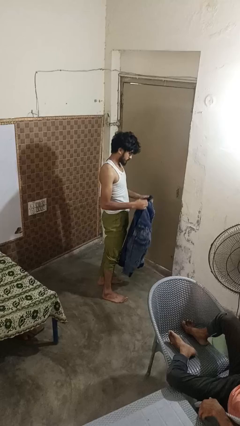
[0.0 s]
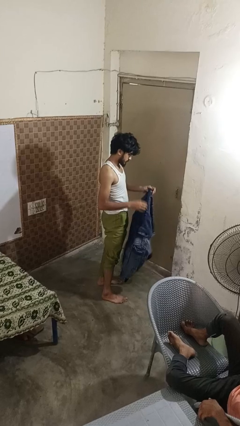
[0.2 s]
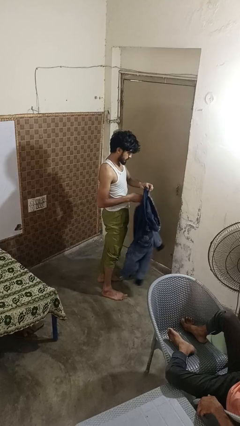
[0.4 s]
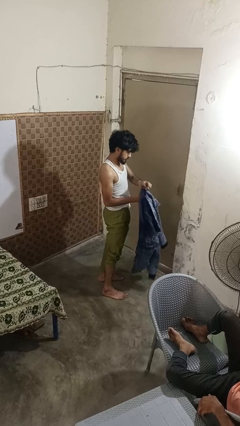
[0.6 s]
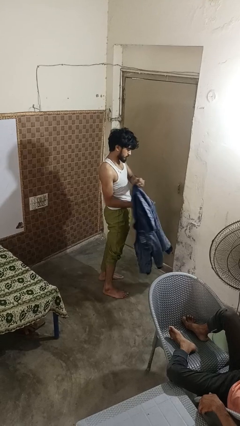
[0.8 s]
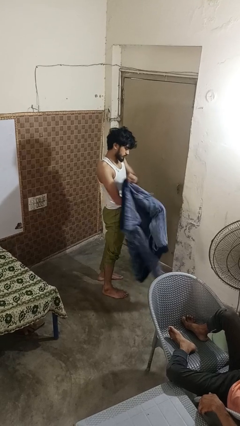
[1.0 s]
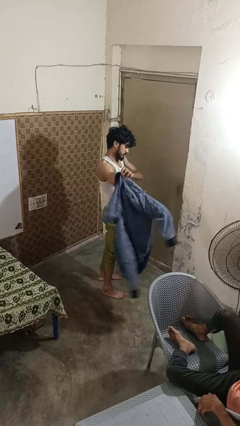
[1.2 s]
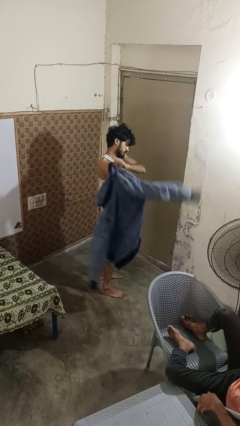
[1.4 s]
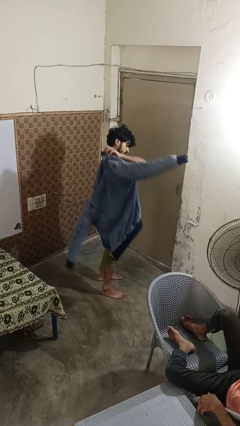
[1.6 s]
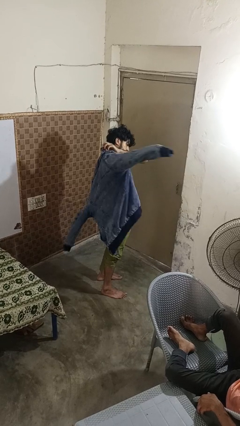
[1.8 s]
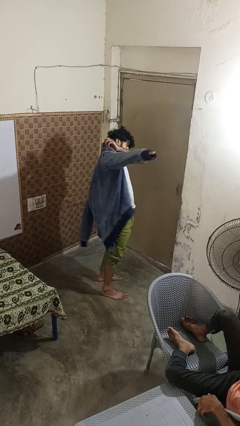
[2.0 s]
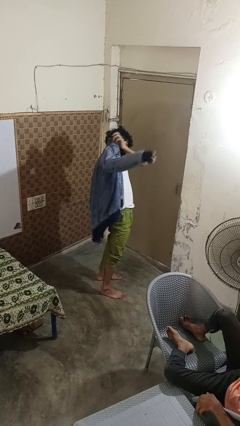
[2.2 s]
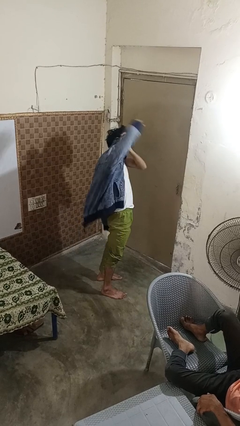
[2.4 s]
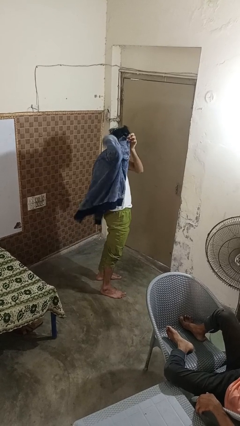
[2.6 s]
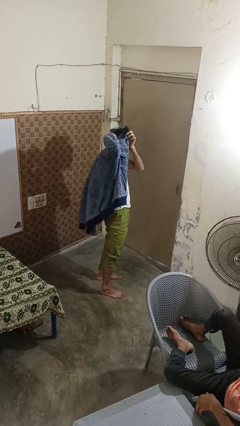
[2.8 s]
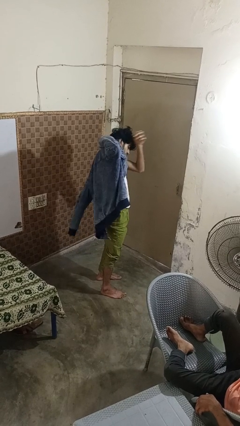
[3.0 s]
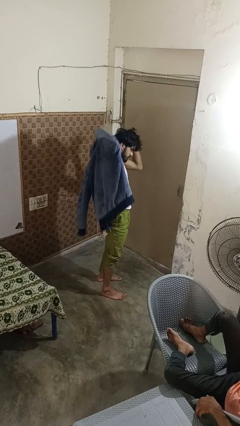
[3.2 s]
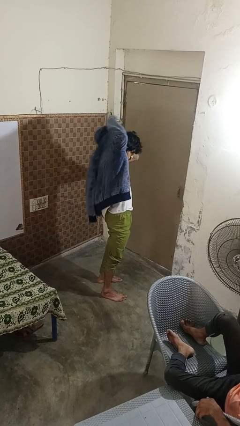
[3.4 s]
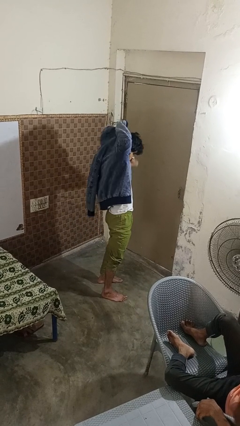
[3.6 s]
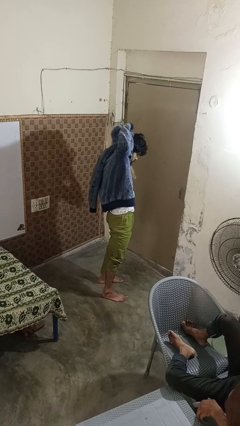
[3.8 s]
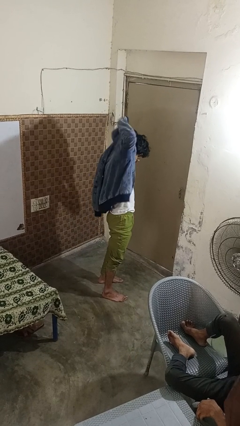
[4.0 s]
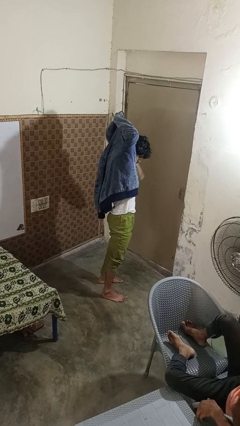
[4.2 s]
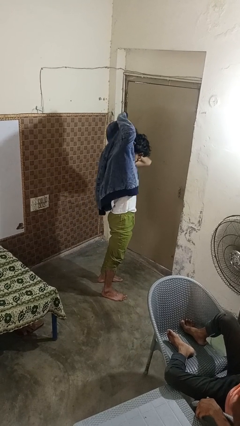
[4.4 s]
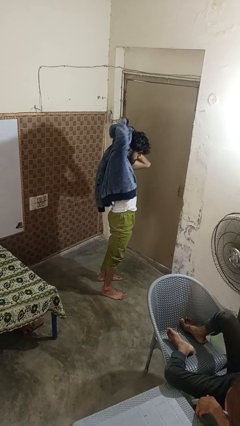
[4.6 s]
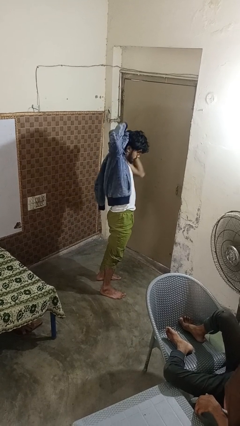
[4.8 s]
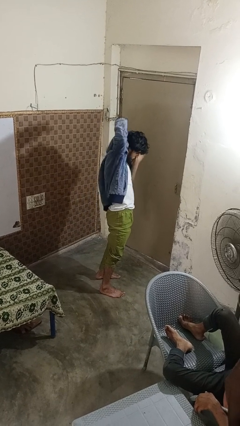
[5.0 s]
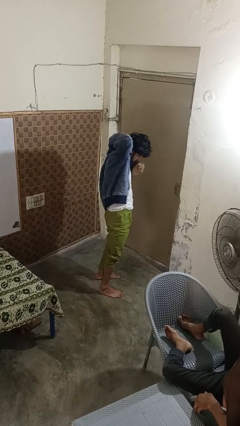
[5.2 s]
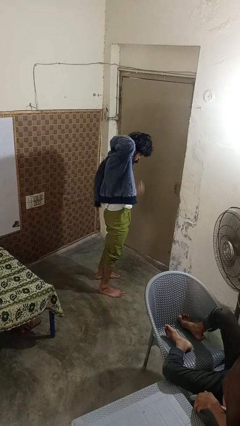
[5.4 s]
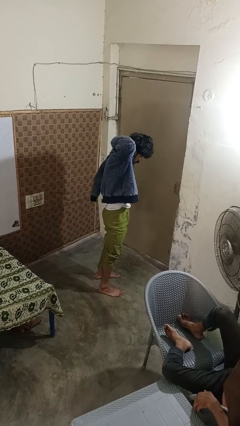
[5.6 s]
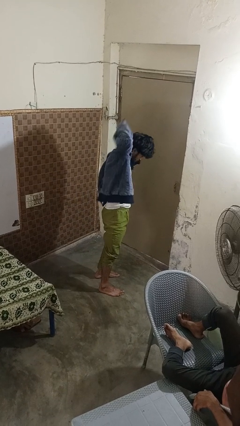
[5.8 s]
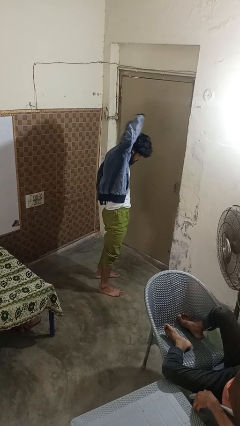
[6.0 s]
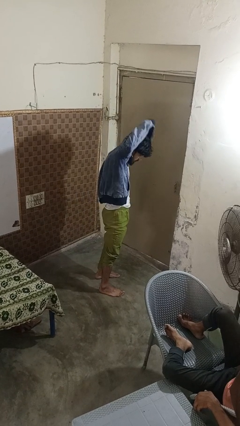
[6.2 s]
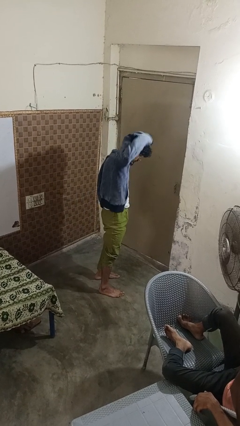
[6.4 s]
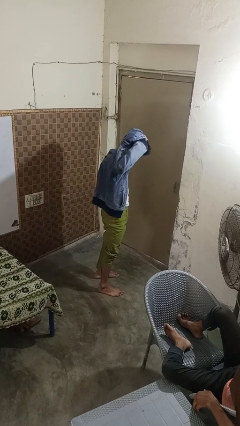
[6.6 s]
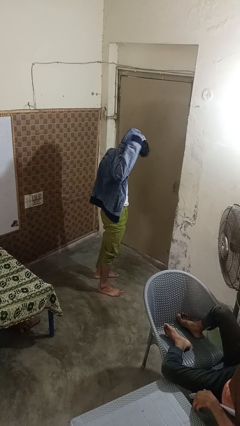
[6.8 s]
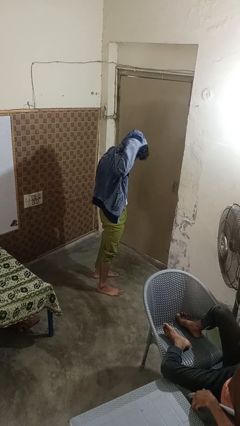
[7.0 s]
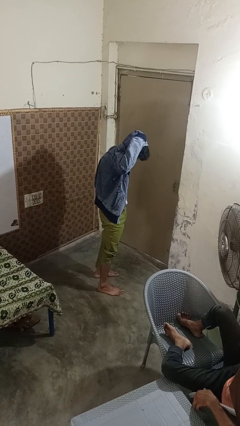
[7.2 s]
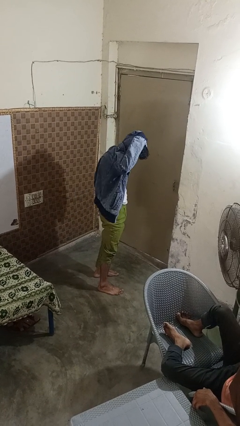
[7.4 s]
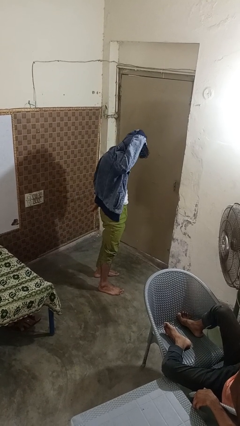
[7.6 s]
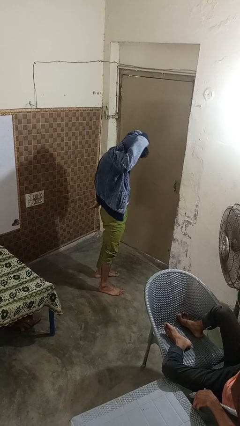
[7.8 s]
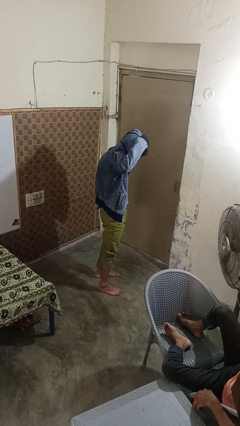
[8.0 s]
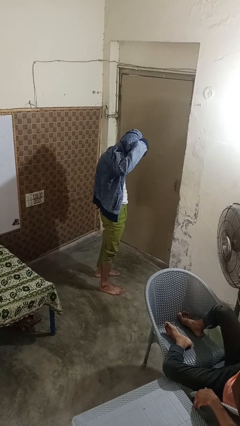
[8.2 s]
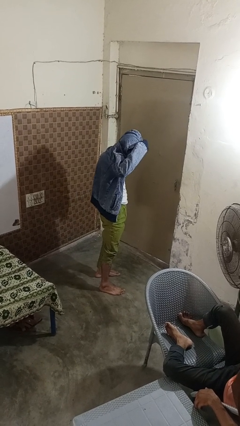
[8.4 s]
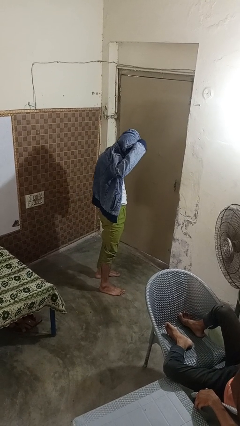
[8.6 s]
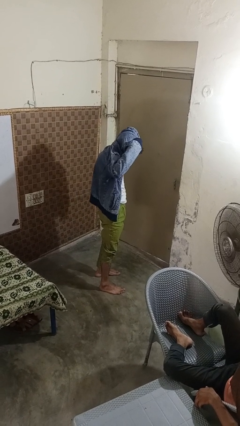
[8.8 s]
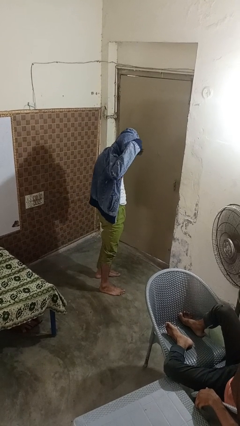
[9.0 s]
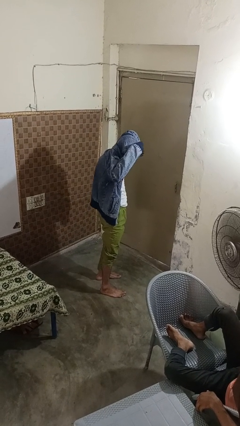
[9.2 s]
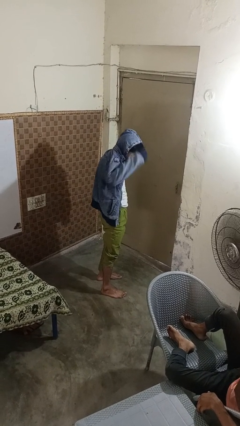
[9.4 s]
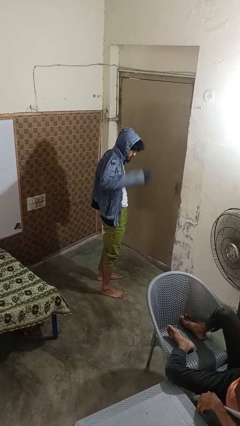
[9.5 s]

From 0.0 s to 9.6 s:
person puts on hoodie

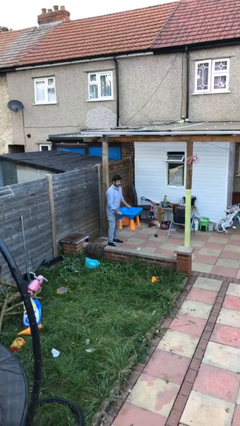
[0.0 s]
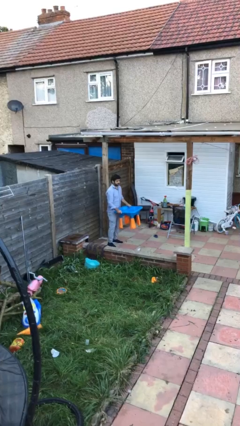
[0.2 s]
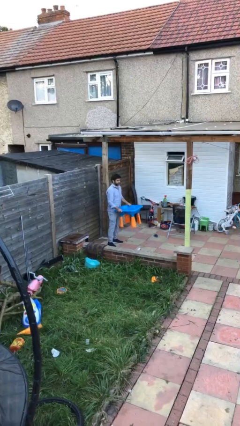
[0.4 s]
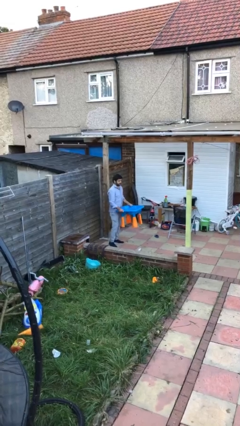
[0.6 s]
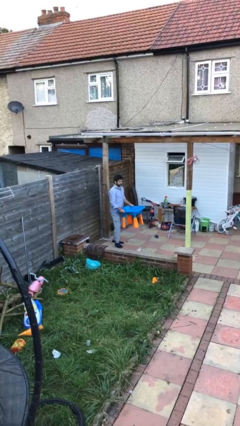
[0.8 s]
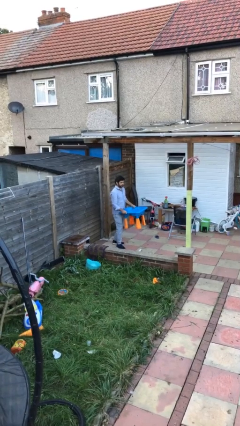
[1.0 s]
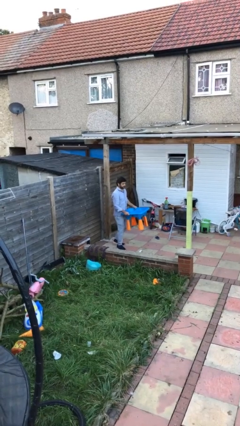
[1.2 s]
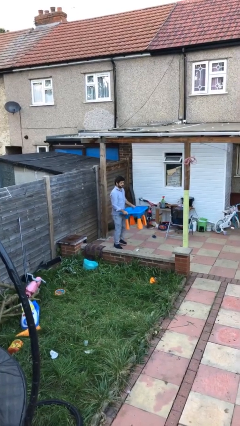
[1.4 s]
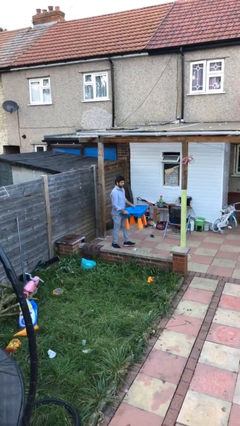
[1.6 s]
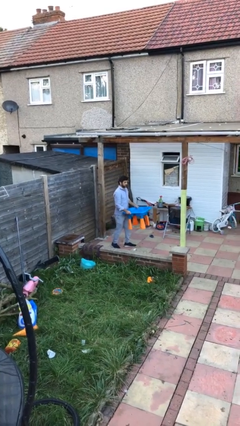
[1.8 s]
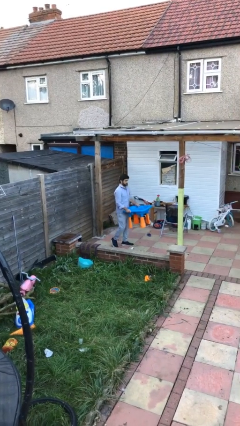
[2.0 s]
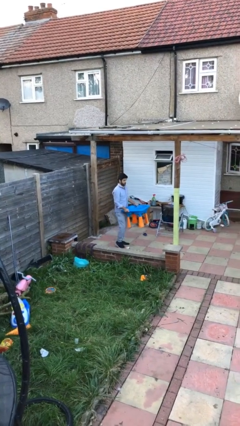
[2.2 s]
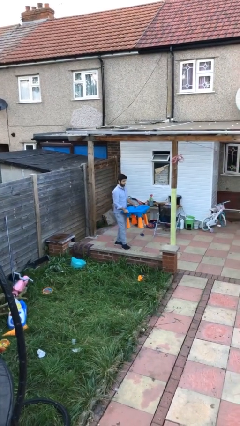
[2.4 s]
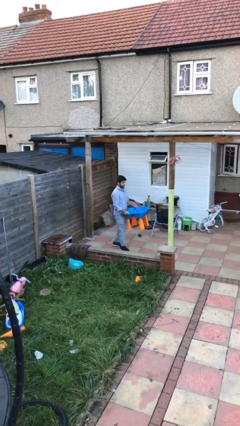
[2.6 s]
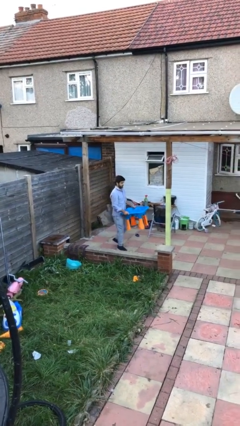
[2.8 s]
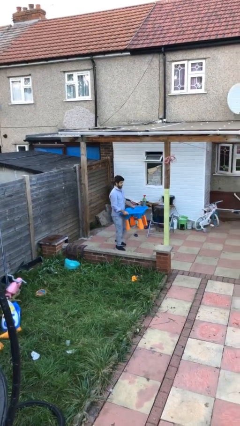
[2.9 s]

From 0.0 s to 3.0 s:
person carries heavy object

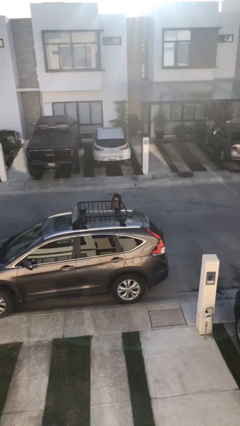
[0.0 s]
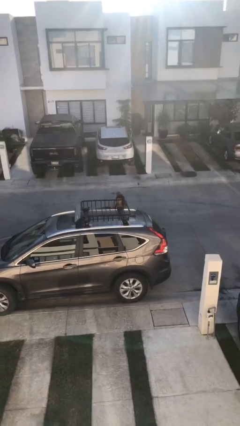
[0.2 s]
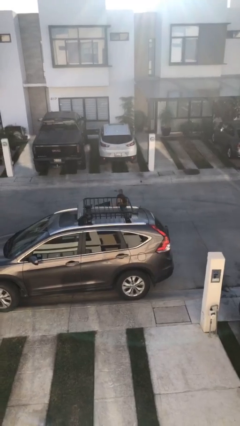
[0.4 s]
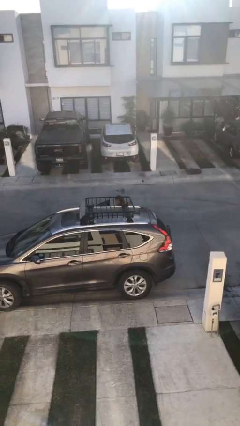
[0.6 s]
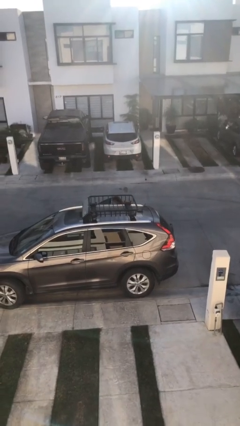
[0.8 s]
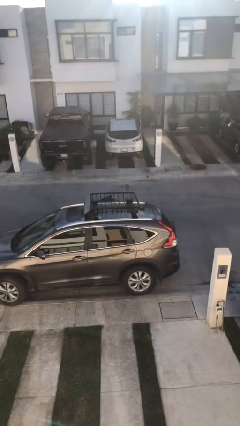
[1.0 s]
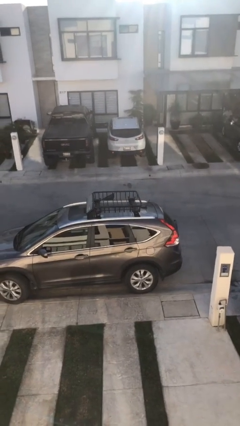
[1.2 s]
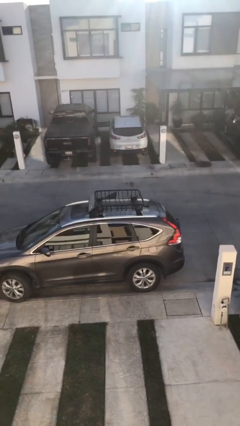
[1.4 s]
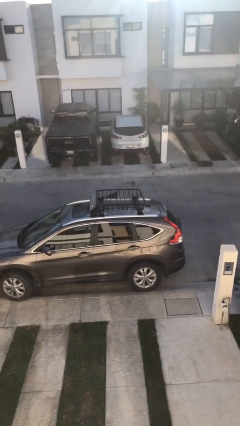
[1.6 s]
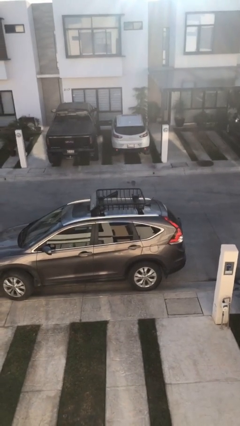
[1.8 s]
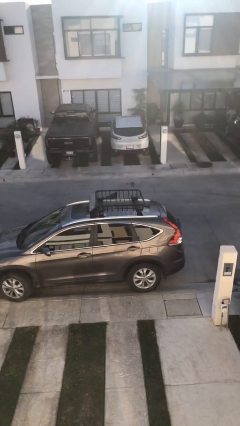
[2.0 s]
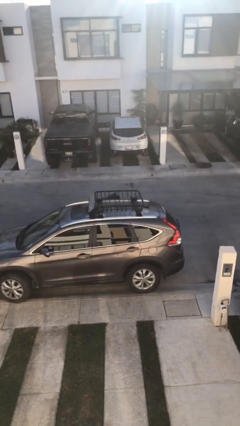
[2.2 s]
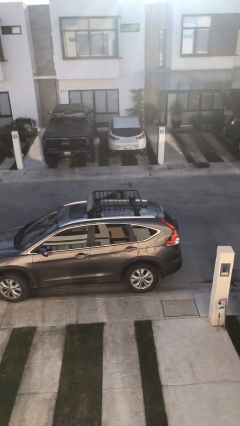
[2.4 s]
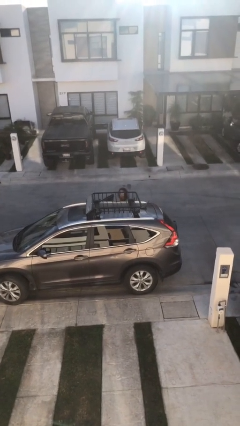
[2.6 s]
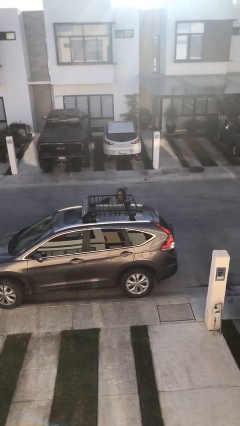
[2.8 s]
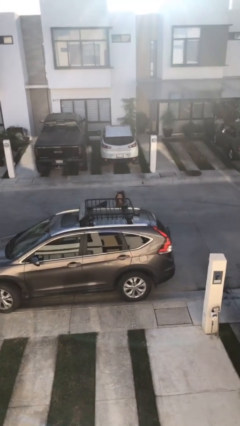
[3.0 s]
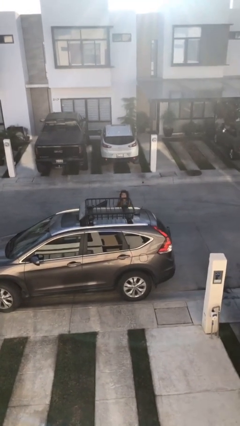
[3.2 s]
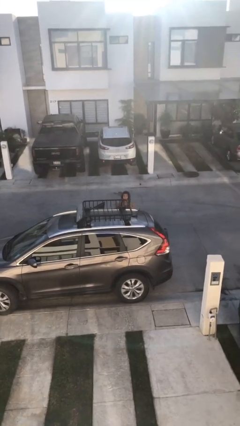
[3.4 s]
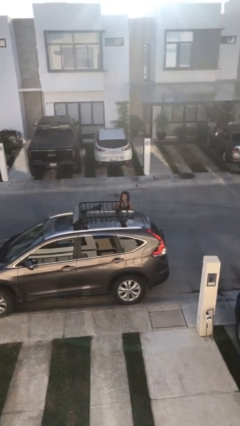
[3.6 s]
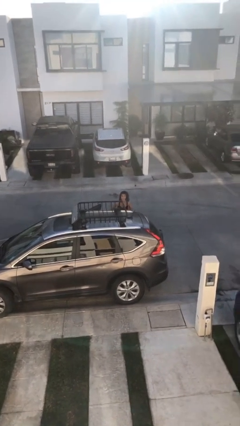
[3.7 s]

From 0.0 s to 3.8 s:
person unloads car

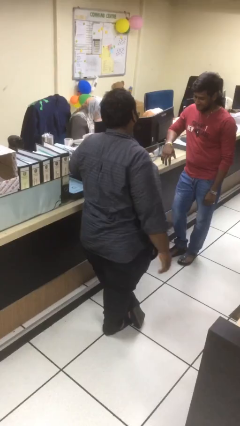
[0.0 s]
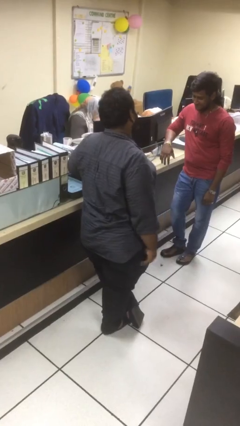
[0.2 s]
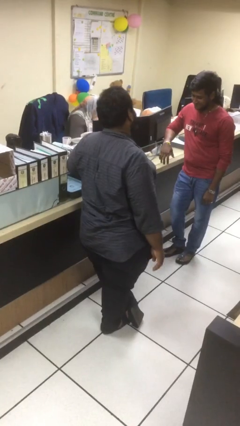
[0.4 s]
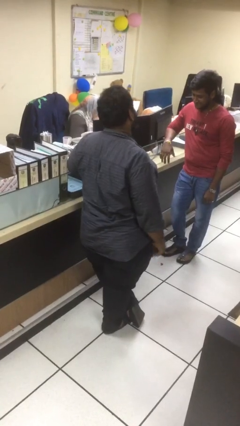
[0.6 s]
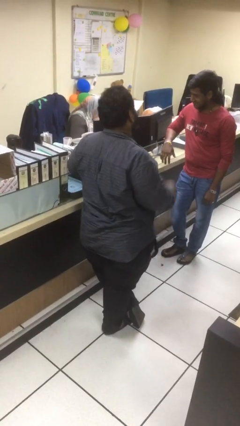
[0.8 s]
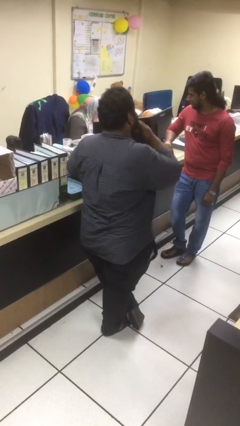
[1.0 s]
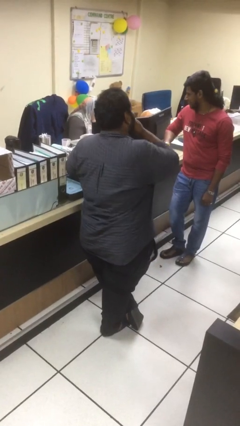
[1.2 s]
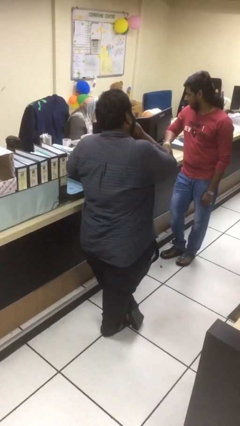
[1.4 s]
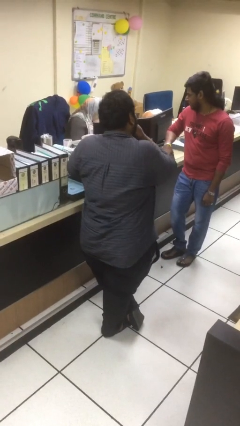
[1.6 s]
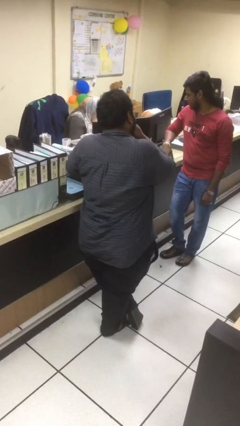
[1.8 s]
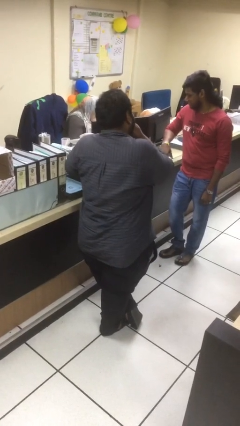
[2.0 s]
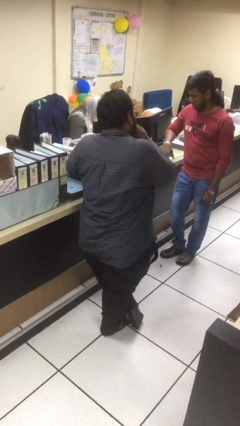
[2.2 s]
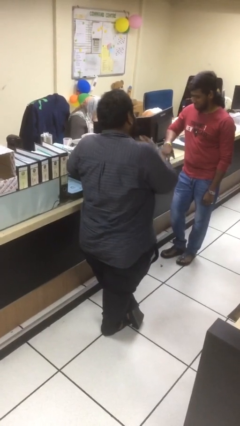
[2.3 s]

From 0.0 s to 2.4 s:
person laughs with person
